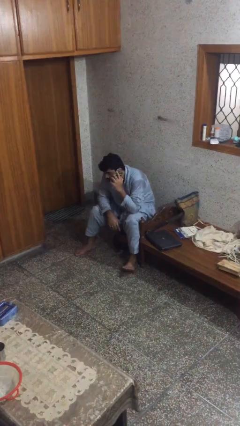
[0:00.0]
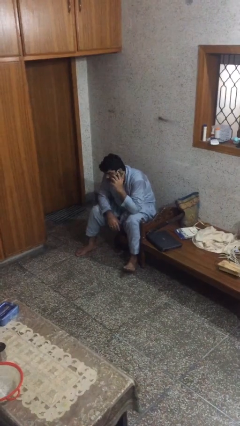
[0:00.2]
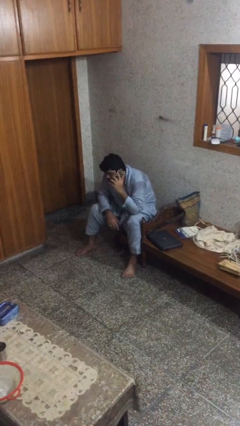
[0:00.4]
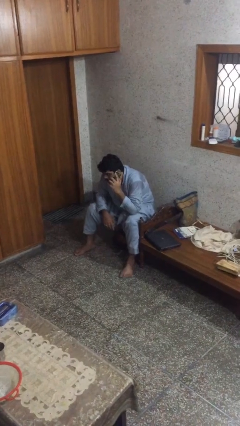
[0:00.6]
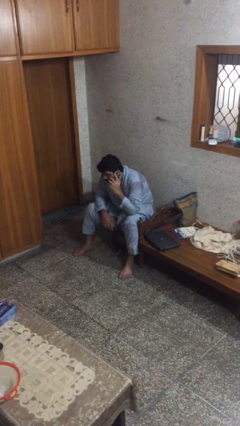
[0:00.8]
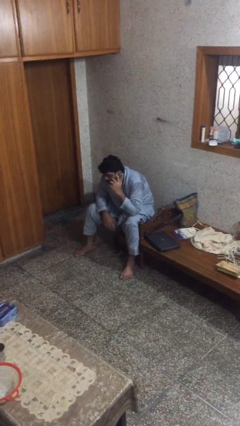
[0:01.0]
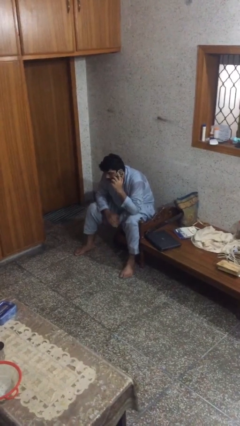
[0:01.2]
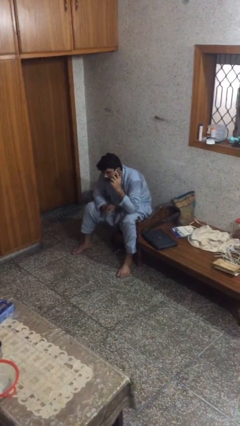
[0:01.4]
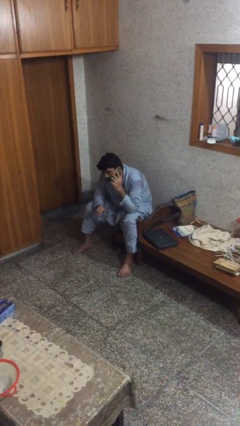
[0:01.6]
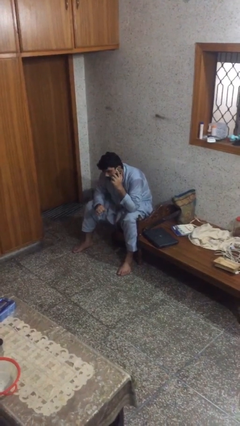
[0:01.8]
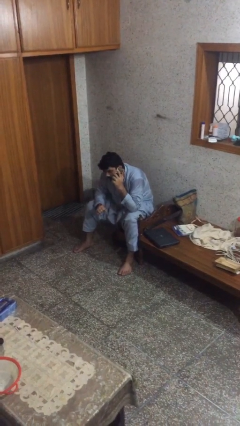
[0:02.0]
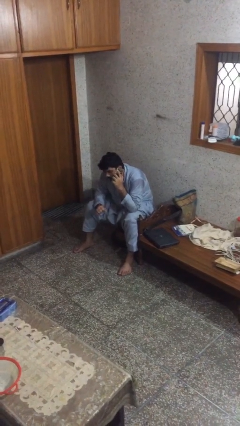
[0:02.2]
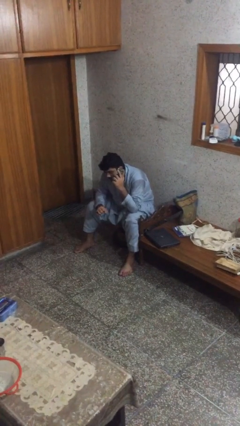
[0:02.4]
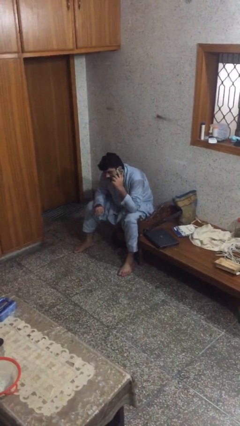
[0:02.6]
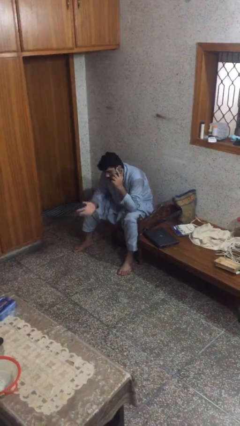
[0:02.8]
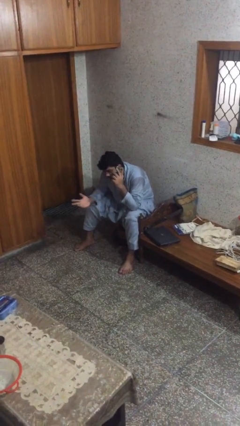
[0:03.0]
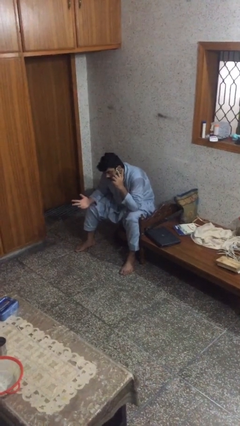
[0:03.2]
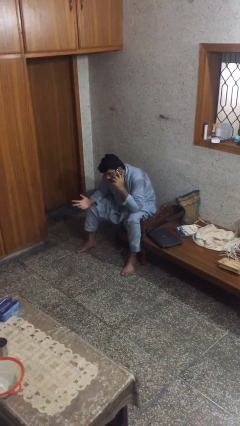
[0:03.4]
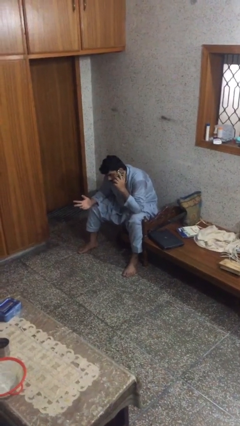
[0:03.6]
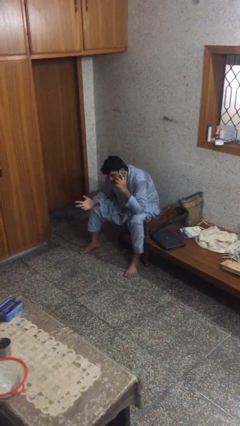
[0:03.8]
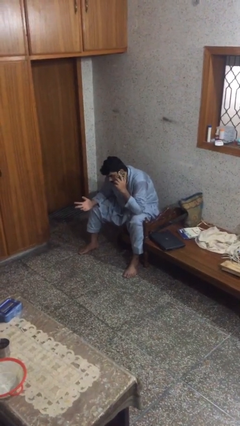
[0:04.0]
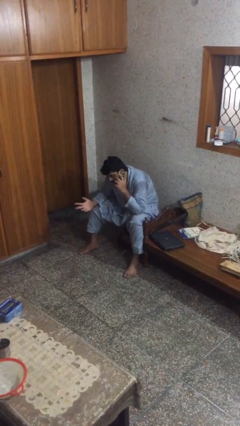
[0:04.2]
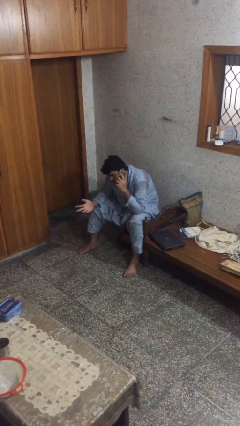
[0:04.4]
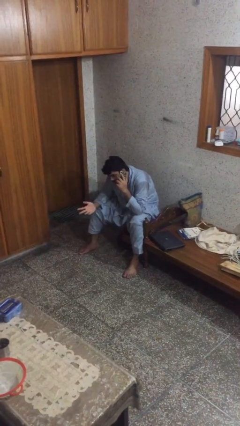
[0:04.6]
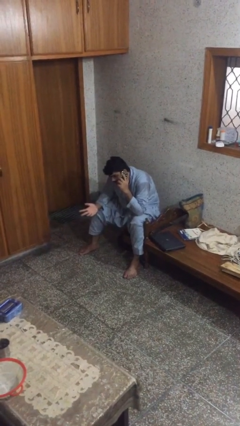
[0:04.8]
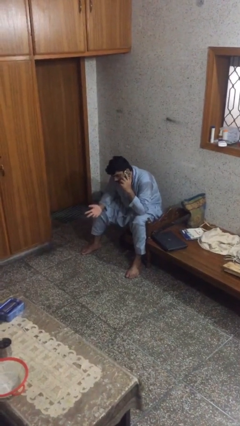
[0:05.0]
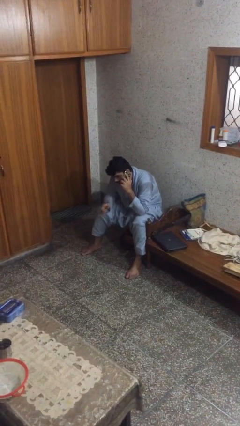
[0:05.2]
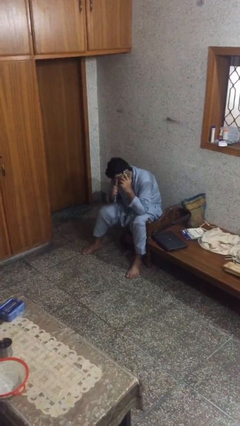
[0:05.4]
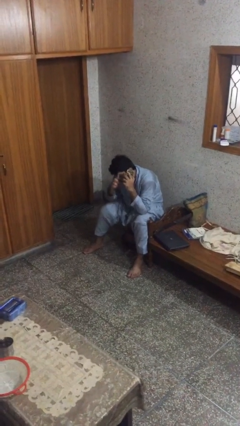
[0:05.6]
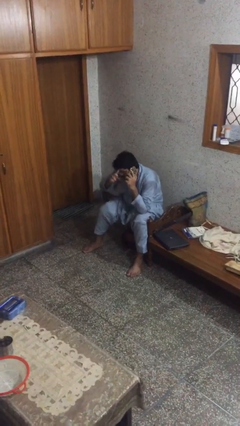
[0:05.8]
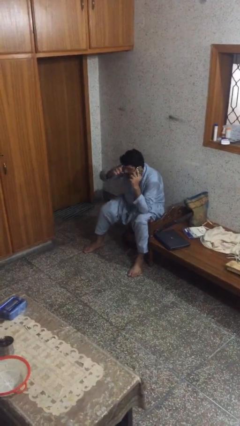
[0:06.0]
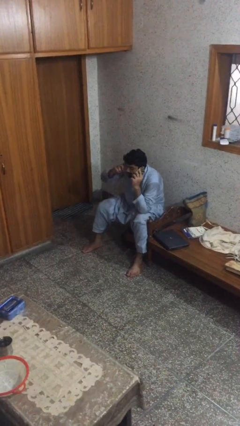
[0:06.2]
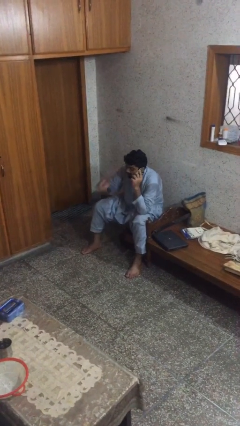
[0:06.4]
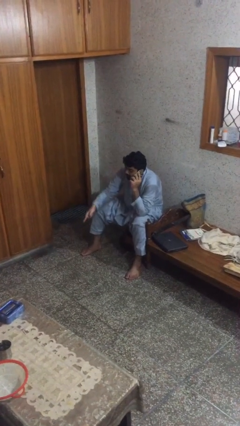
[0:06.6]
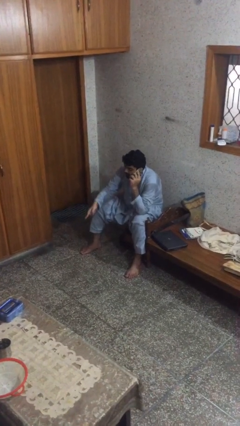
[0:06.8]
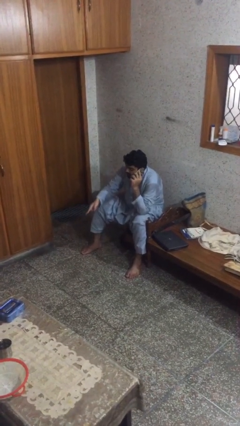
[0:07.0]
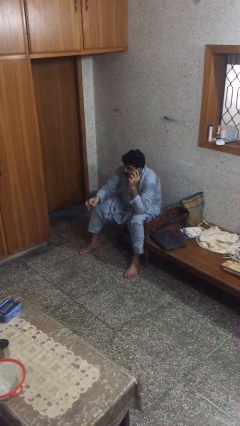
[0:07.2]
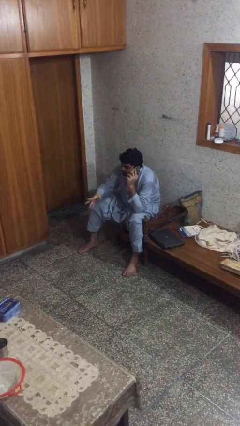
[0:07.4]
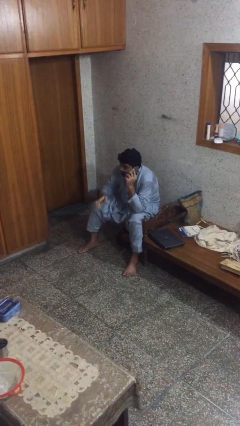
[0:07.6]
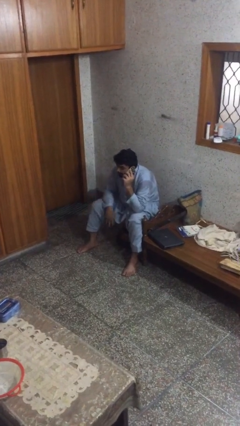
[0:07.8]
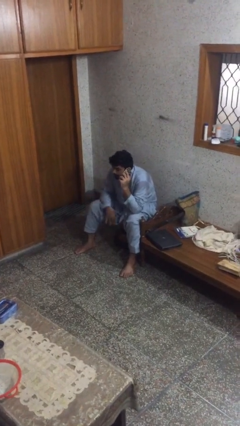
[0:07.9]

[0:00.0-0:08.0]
person talks on phone

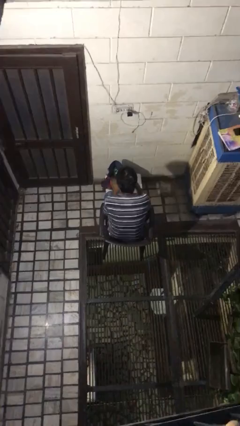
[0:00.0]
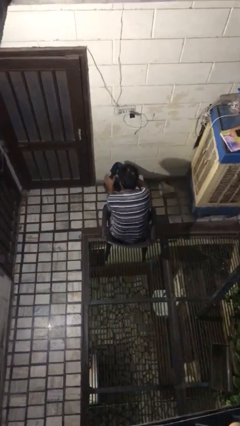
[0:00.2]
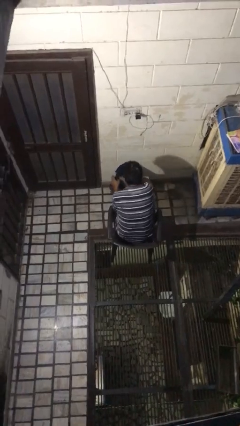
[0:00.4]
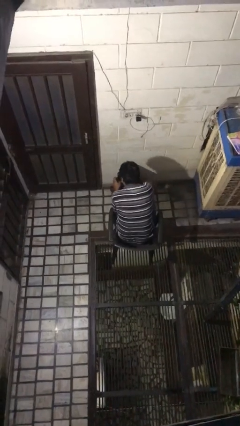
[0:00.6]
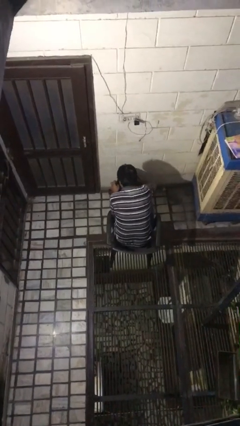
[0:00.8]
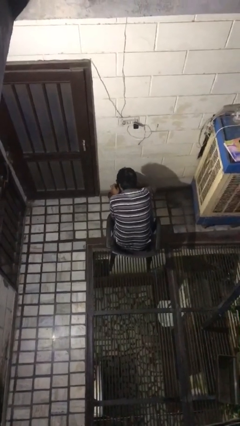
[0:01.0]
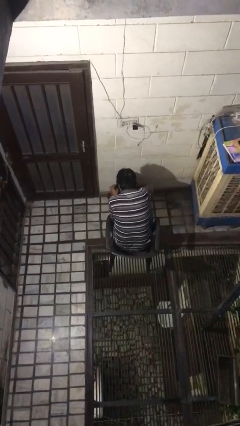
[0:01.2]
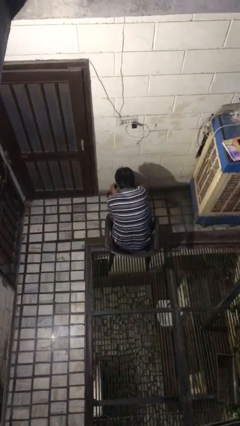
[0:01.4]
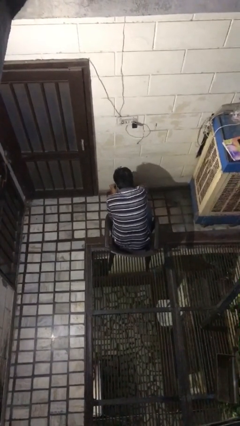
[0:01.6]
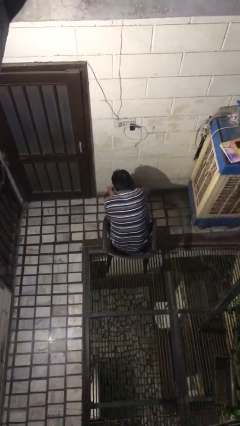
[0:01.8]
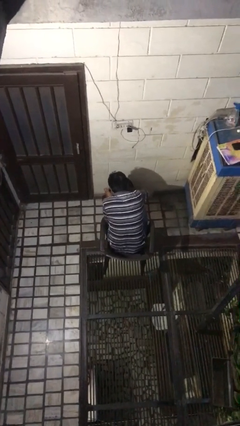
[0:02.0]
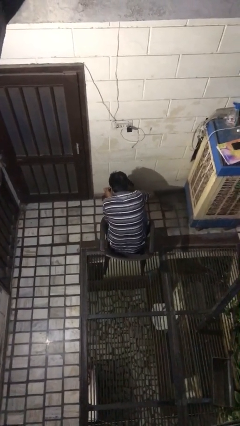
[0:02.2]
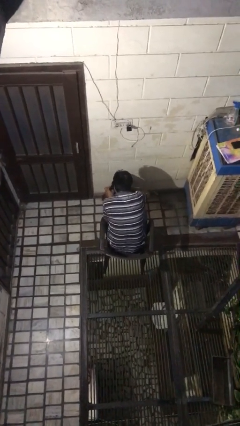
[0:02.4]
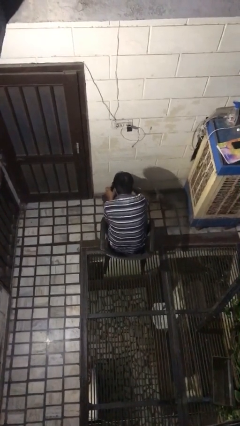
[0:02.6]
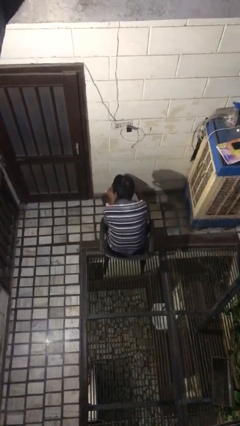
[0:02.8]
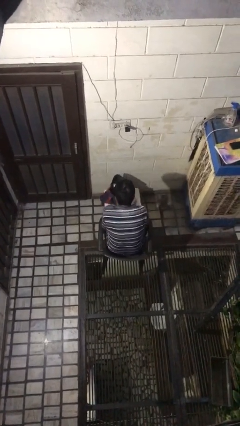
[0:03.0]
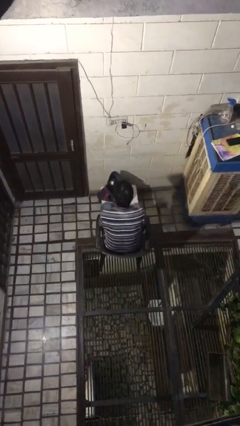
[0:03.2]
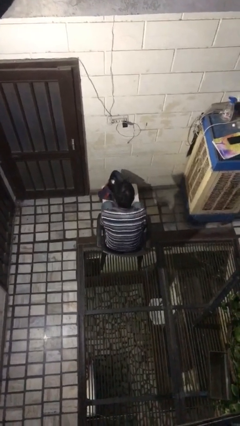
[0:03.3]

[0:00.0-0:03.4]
person searches in bag

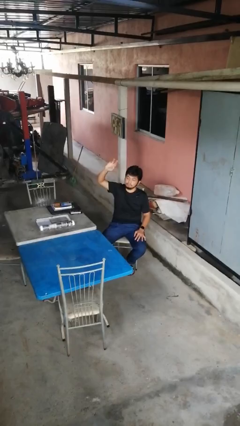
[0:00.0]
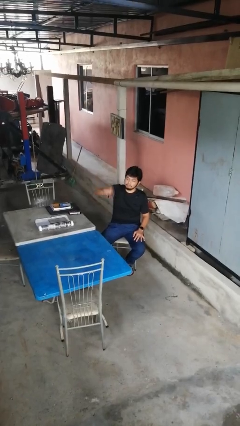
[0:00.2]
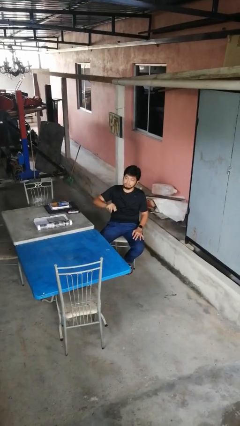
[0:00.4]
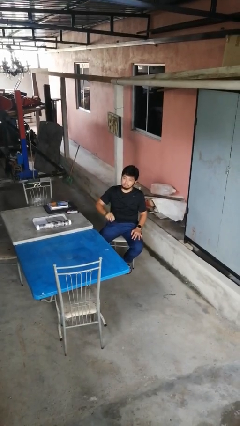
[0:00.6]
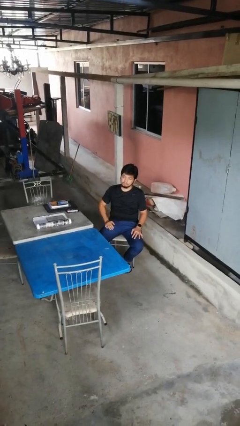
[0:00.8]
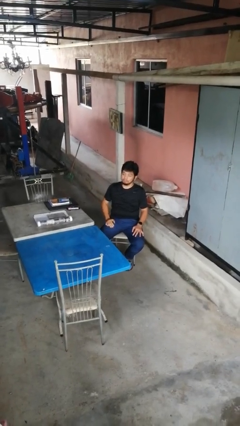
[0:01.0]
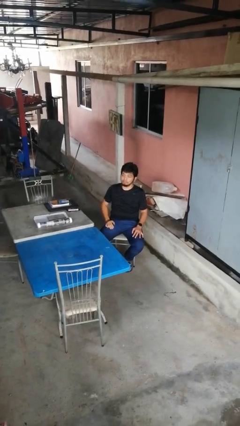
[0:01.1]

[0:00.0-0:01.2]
person gestures swipe down

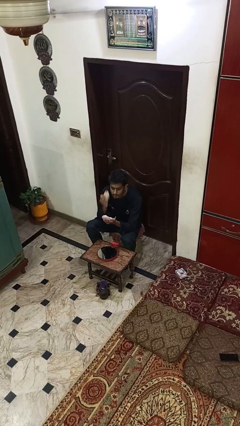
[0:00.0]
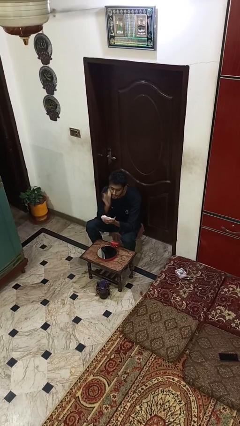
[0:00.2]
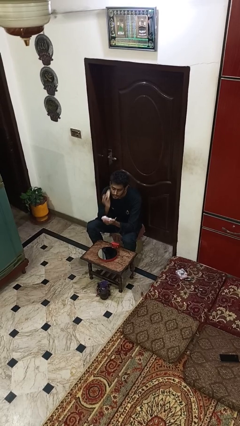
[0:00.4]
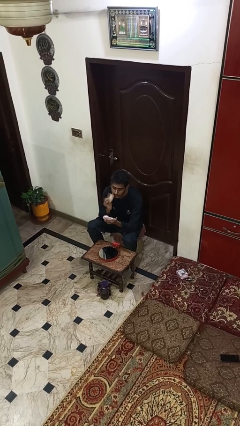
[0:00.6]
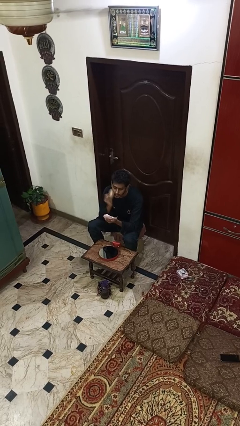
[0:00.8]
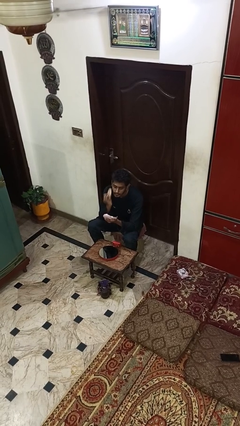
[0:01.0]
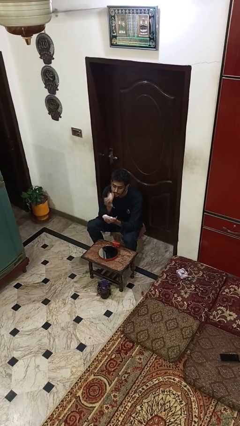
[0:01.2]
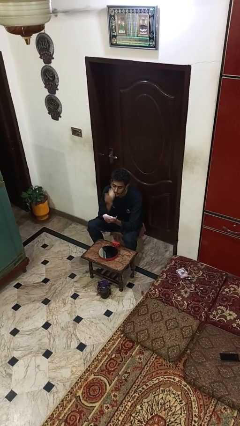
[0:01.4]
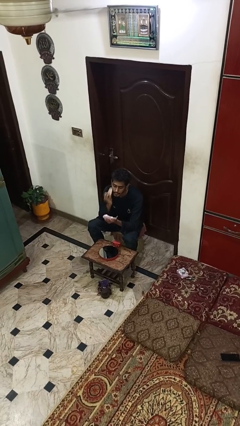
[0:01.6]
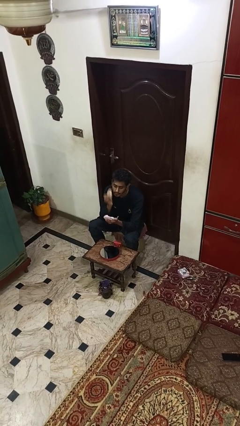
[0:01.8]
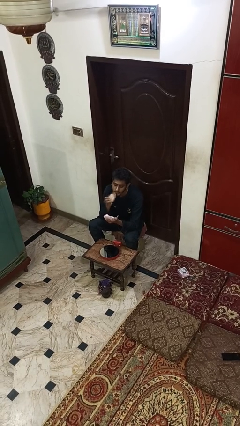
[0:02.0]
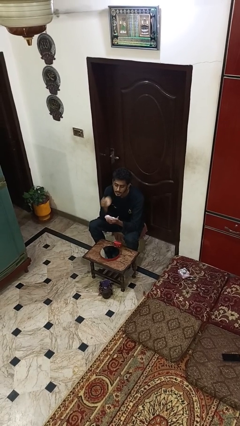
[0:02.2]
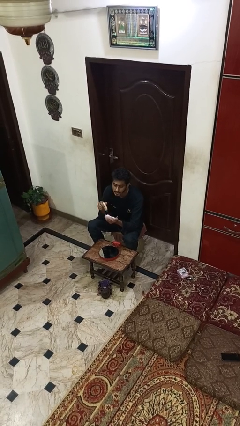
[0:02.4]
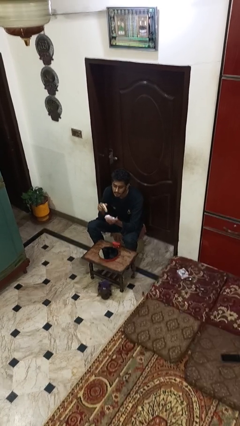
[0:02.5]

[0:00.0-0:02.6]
person applies foundation makeup

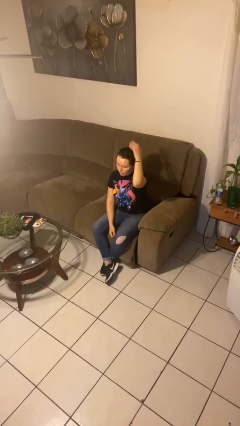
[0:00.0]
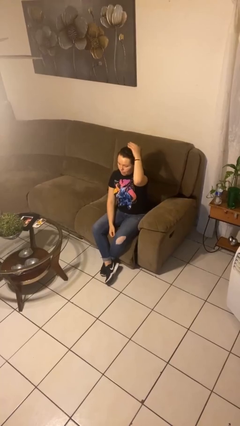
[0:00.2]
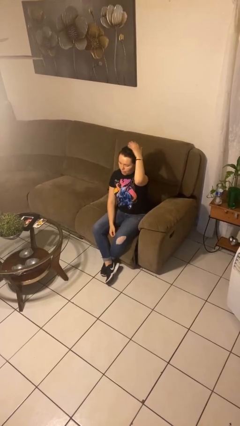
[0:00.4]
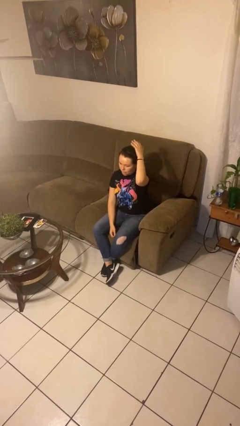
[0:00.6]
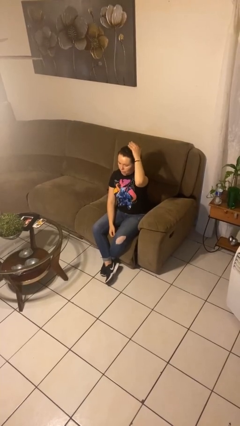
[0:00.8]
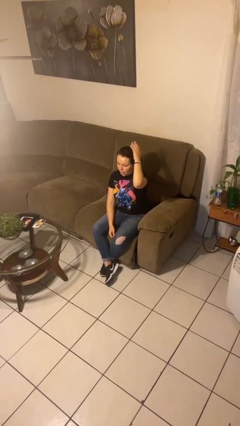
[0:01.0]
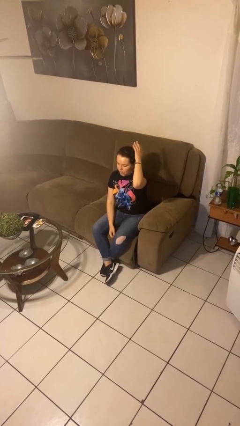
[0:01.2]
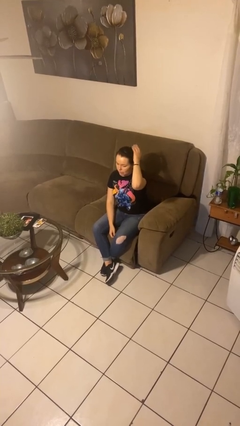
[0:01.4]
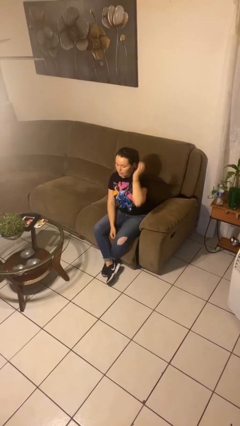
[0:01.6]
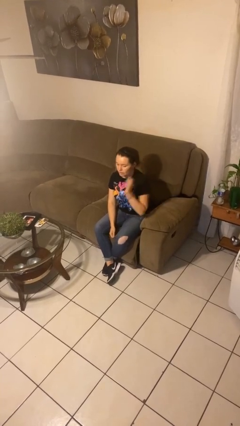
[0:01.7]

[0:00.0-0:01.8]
person pats head

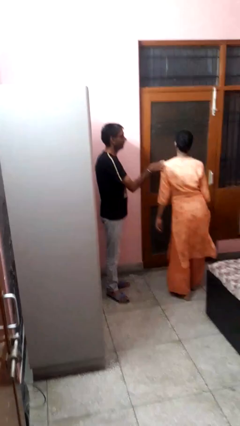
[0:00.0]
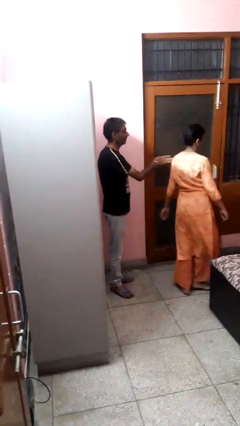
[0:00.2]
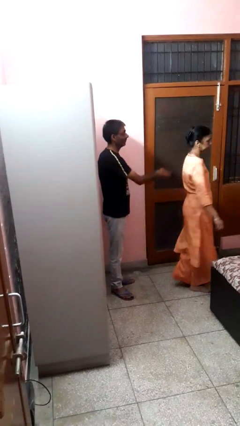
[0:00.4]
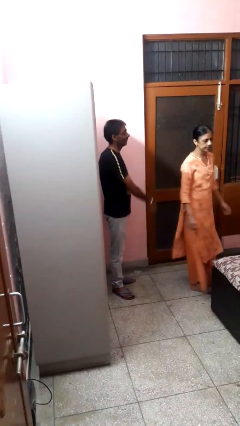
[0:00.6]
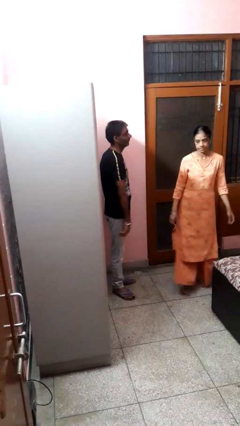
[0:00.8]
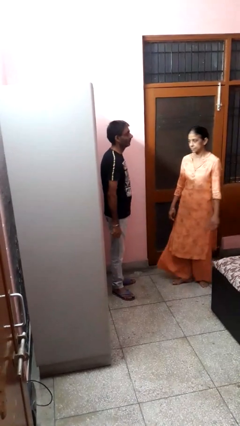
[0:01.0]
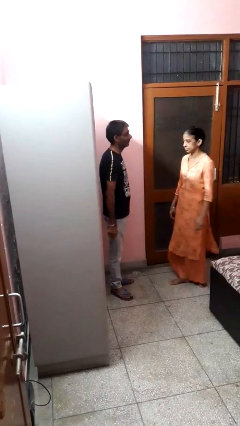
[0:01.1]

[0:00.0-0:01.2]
person spins person around
